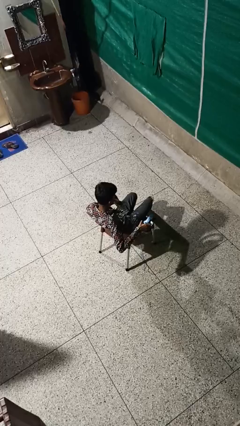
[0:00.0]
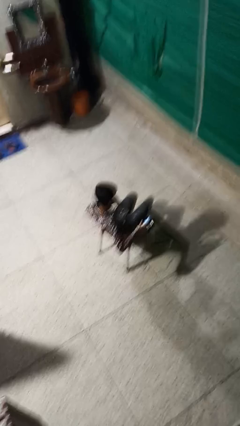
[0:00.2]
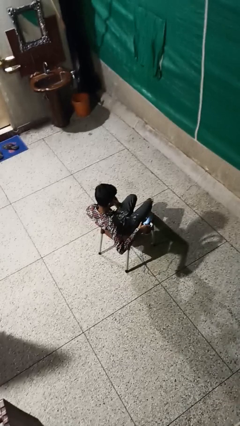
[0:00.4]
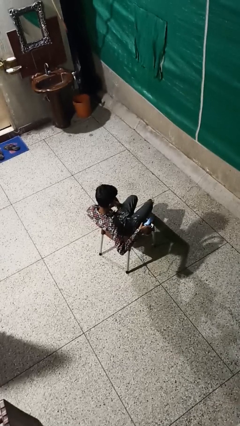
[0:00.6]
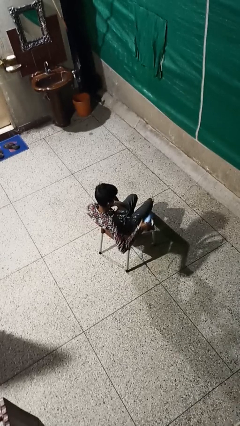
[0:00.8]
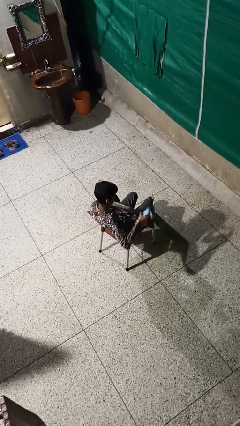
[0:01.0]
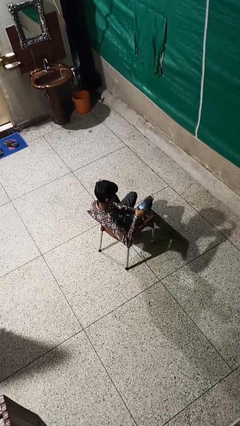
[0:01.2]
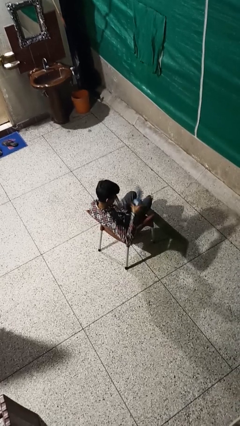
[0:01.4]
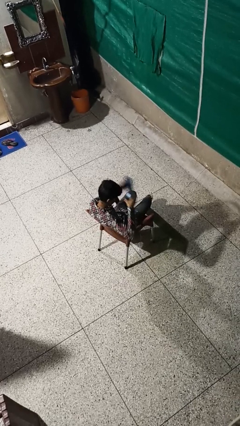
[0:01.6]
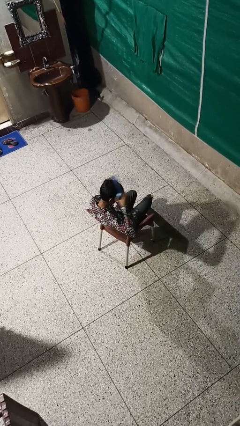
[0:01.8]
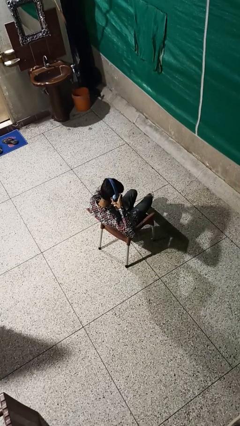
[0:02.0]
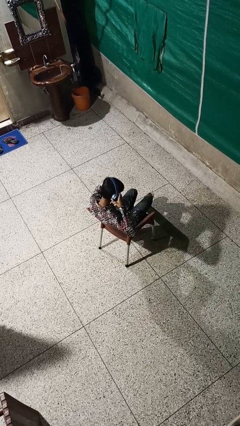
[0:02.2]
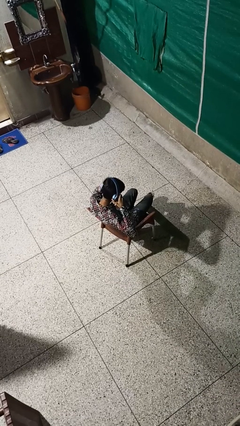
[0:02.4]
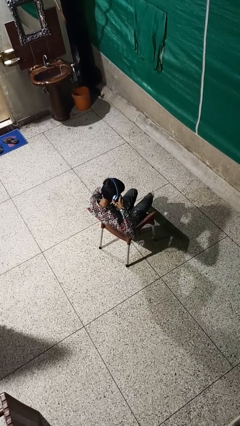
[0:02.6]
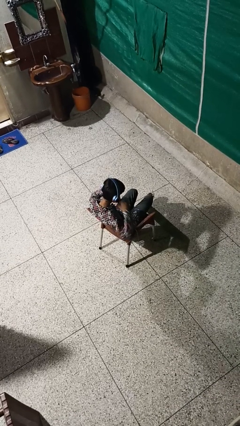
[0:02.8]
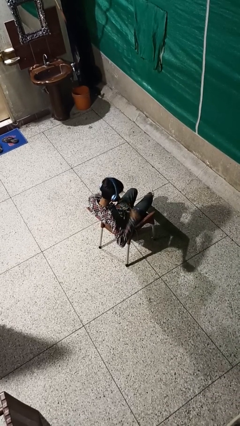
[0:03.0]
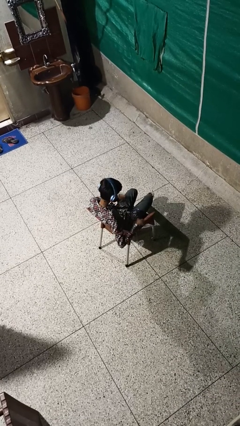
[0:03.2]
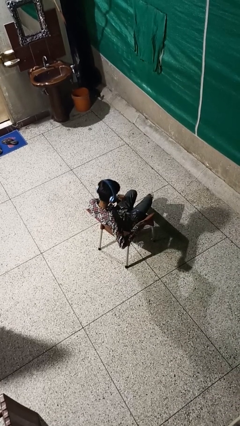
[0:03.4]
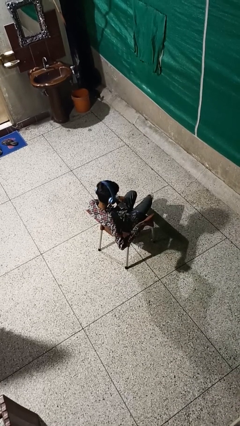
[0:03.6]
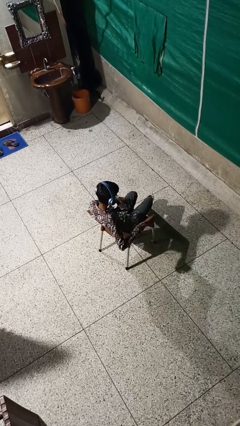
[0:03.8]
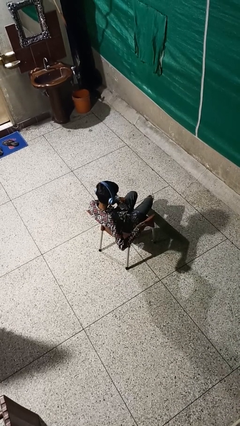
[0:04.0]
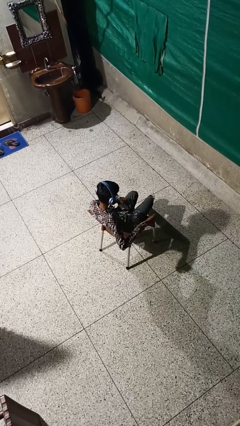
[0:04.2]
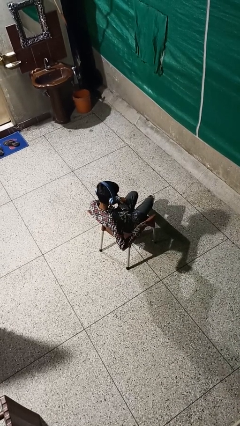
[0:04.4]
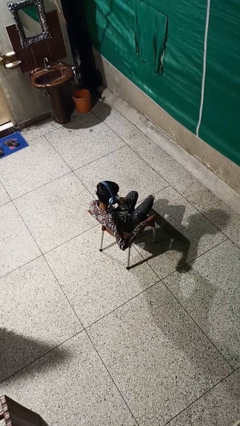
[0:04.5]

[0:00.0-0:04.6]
person puts on headphones

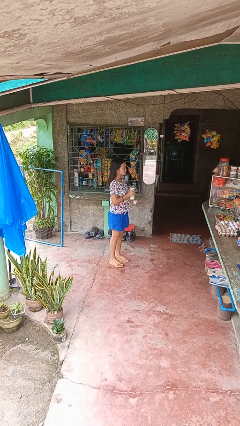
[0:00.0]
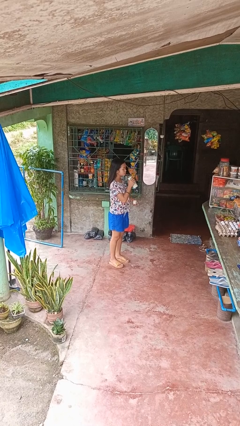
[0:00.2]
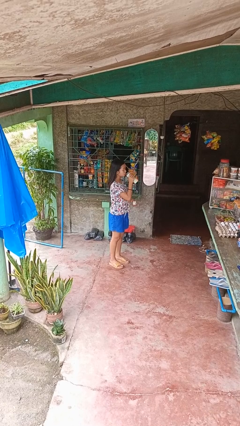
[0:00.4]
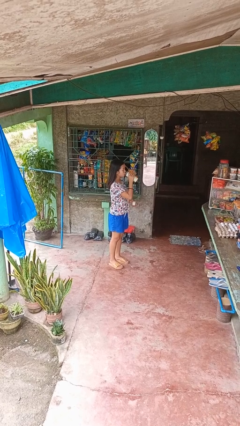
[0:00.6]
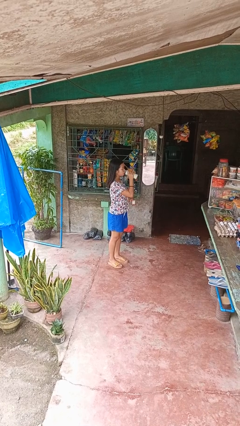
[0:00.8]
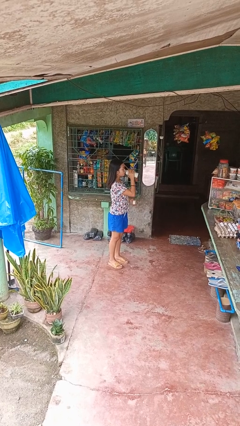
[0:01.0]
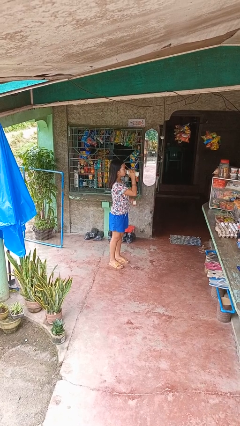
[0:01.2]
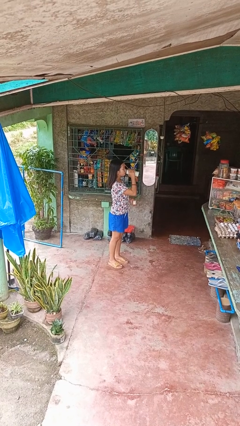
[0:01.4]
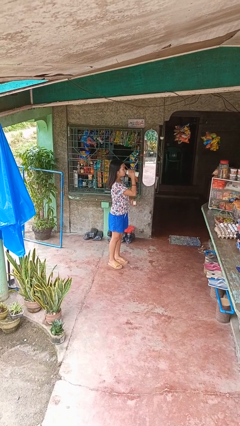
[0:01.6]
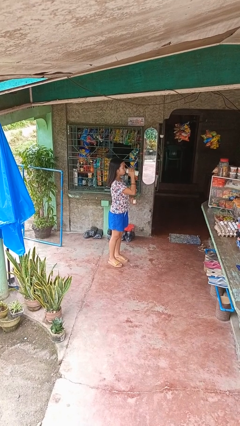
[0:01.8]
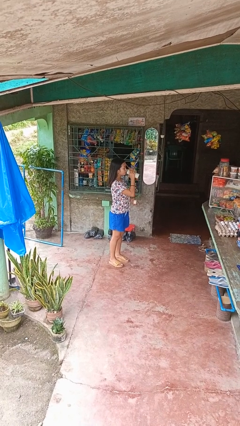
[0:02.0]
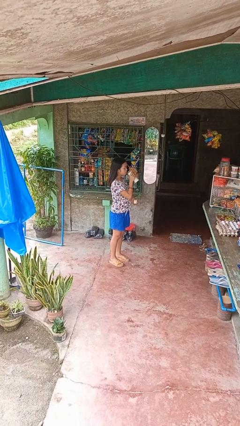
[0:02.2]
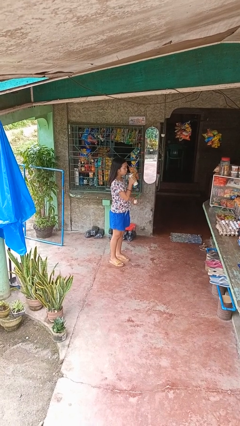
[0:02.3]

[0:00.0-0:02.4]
person drinks from bottle

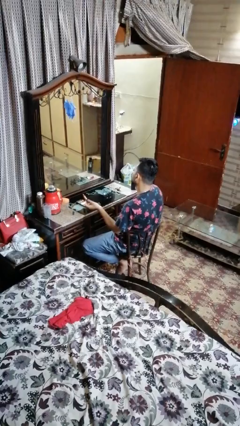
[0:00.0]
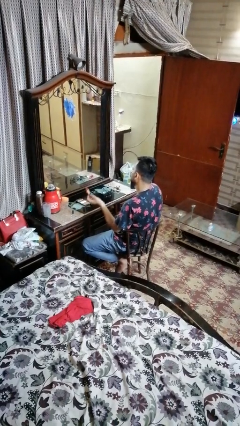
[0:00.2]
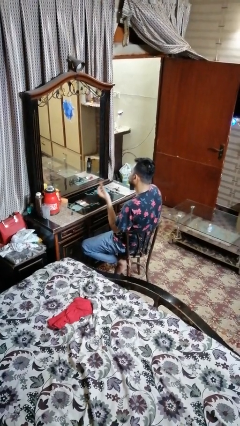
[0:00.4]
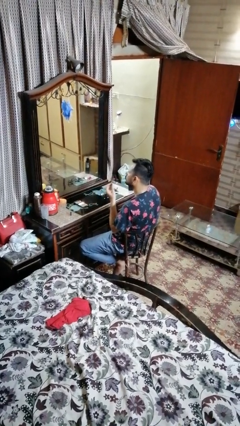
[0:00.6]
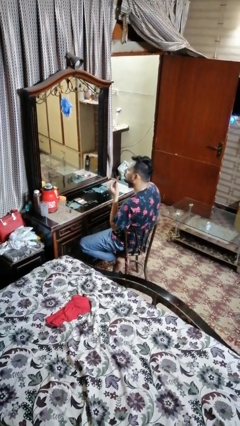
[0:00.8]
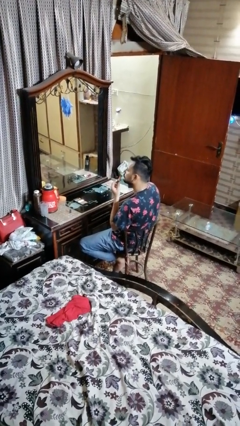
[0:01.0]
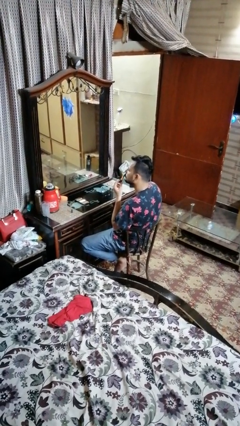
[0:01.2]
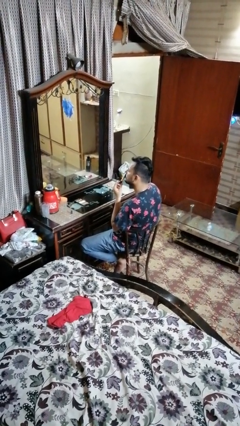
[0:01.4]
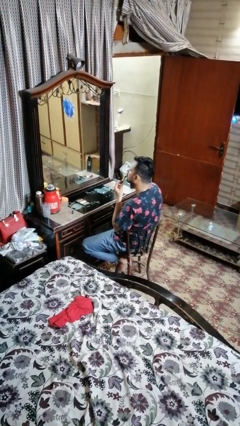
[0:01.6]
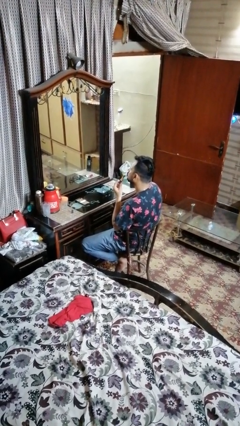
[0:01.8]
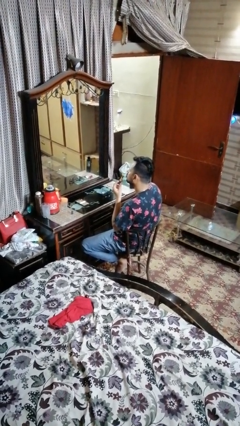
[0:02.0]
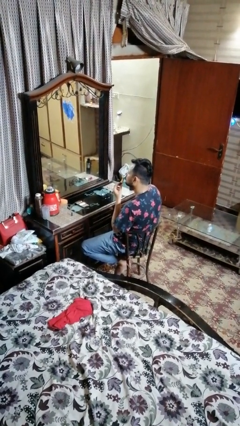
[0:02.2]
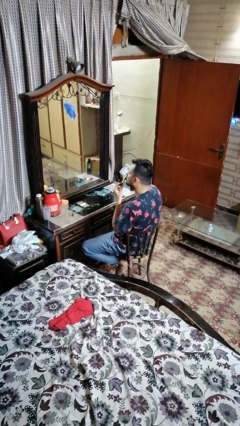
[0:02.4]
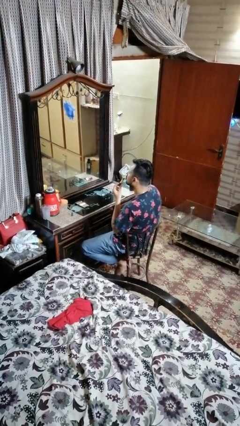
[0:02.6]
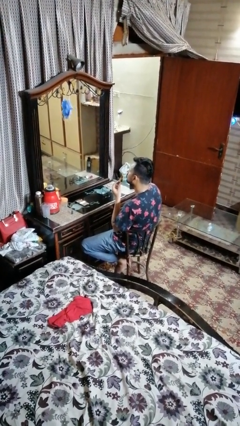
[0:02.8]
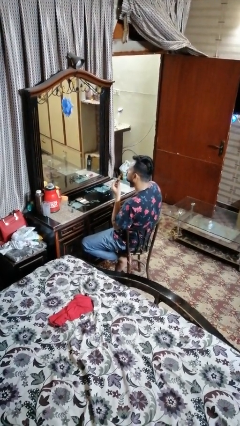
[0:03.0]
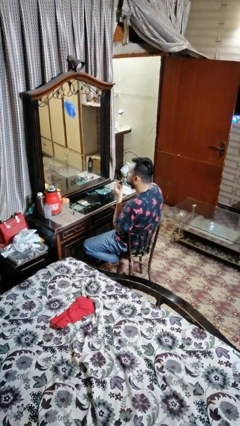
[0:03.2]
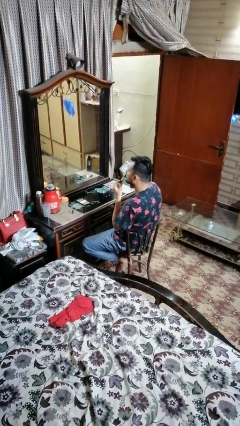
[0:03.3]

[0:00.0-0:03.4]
person applies lip makeup

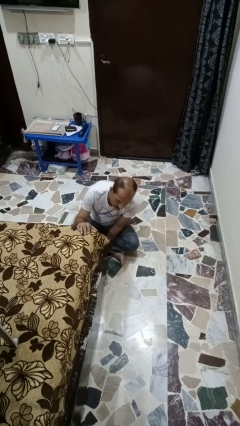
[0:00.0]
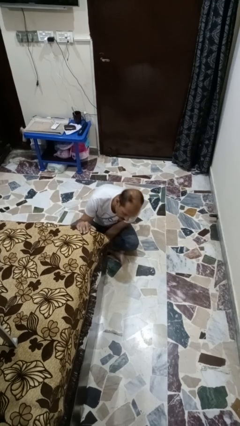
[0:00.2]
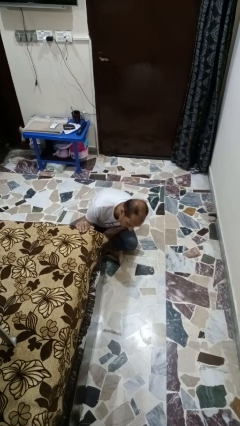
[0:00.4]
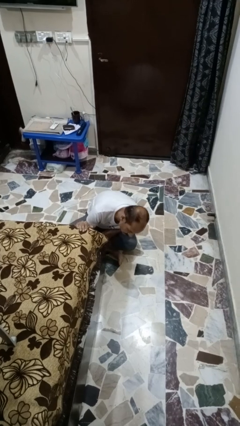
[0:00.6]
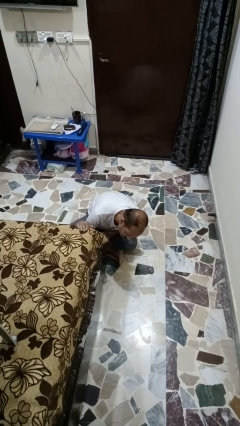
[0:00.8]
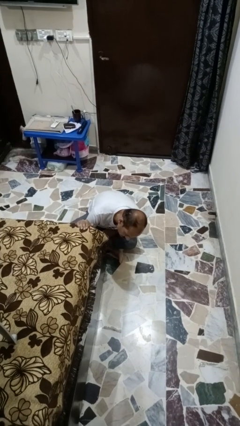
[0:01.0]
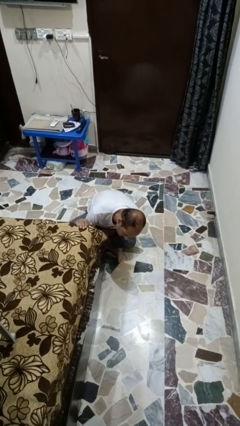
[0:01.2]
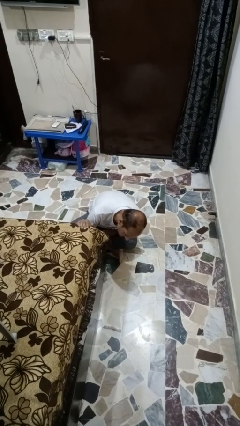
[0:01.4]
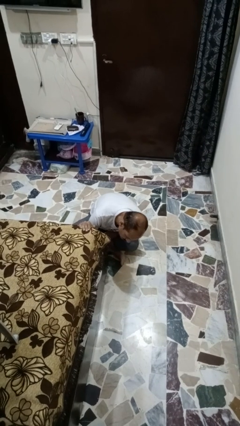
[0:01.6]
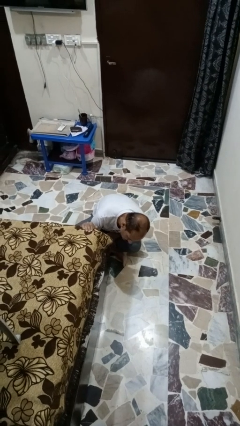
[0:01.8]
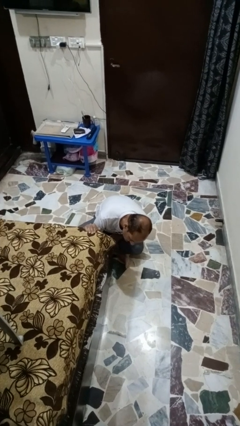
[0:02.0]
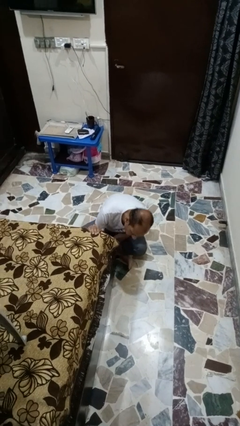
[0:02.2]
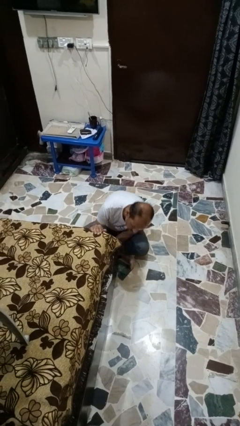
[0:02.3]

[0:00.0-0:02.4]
person searches under bed

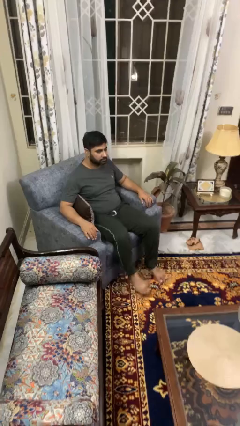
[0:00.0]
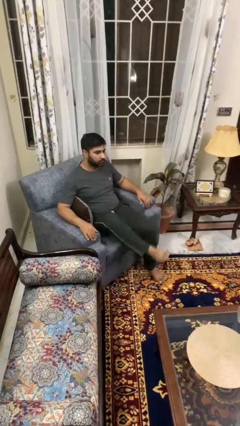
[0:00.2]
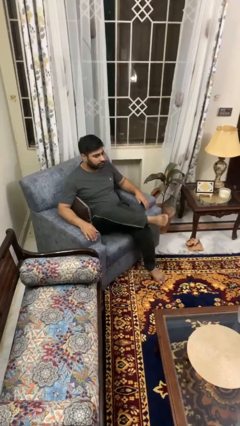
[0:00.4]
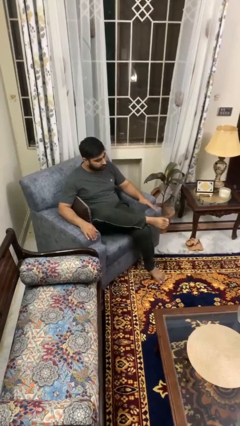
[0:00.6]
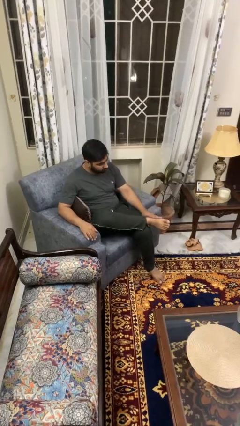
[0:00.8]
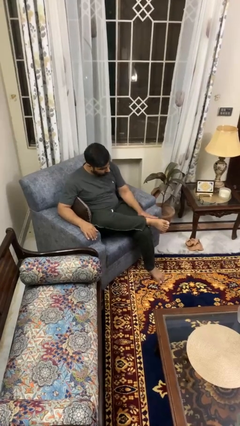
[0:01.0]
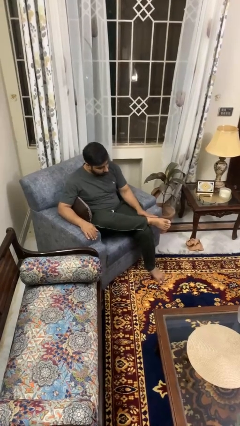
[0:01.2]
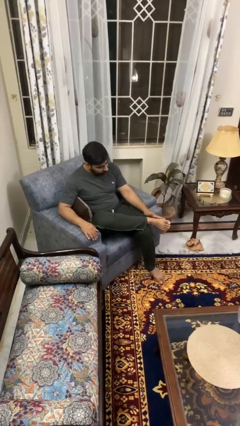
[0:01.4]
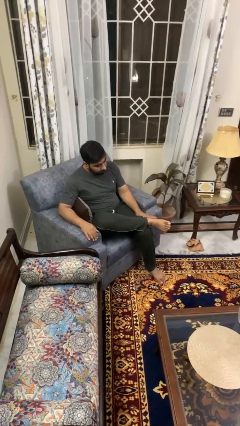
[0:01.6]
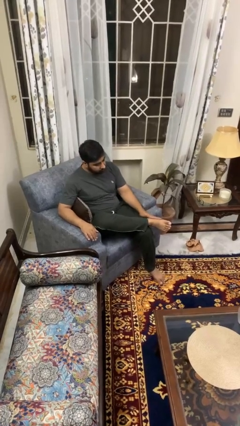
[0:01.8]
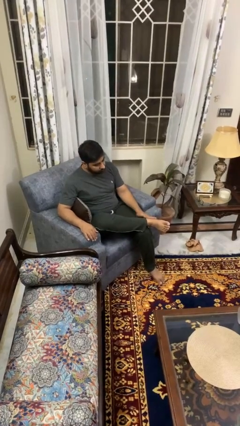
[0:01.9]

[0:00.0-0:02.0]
person rubs foot

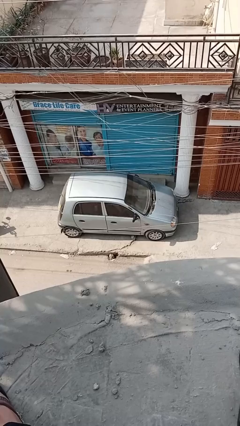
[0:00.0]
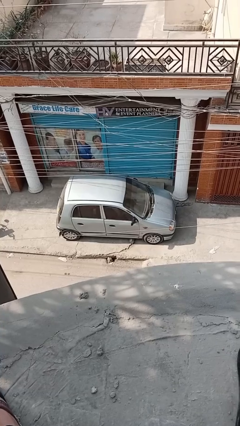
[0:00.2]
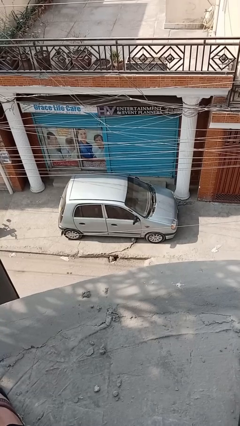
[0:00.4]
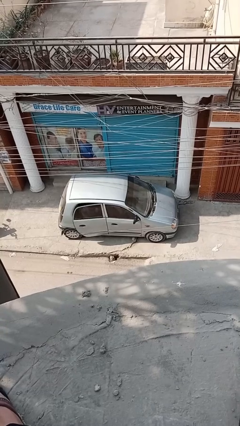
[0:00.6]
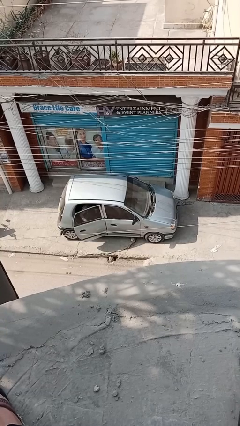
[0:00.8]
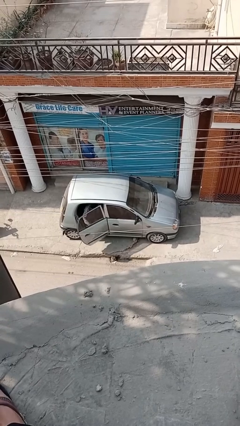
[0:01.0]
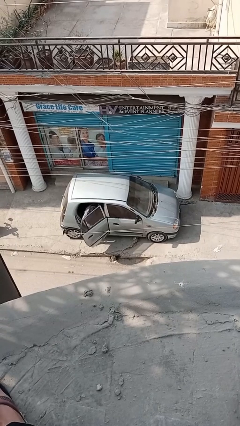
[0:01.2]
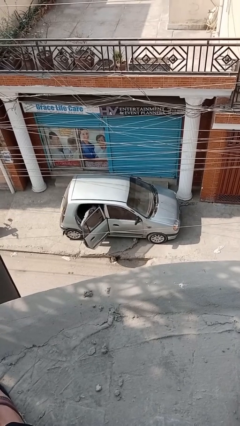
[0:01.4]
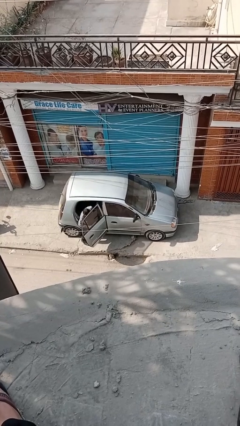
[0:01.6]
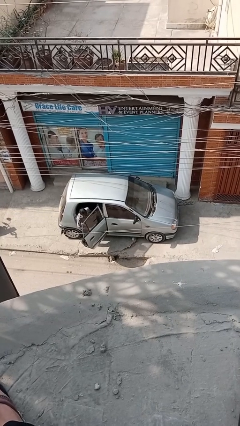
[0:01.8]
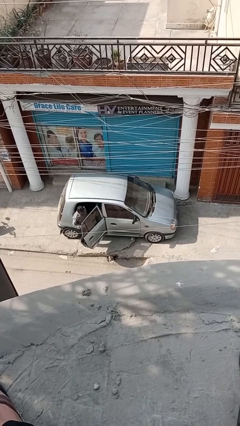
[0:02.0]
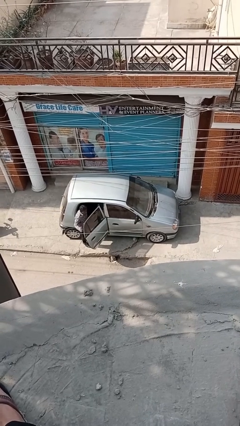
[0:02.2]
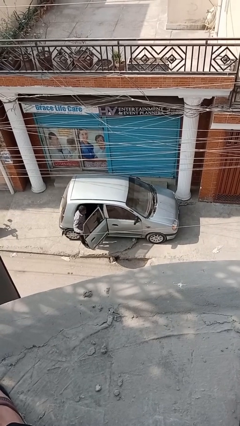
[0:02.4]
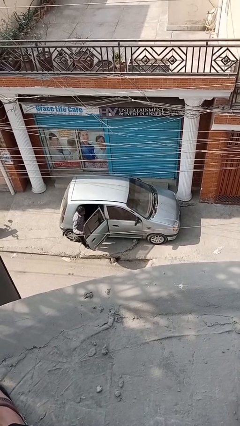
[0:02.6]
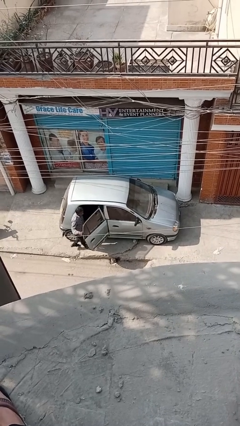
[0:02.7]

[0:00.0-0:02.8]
car drops off person
